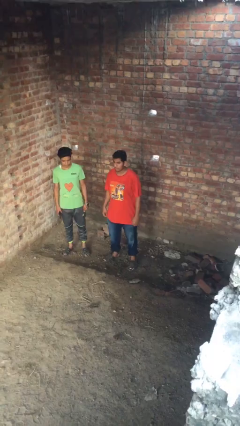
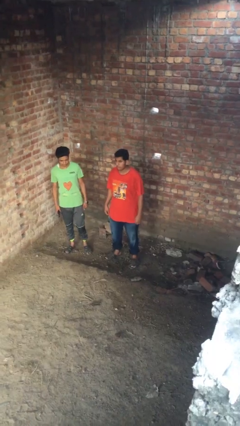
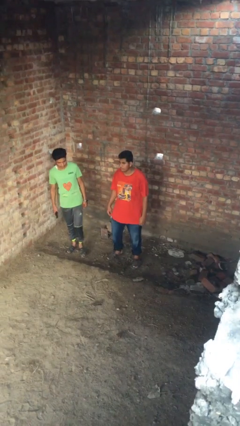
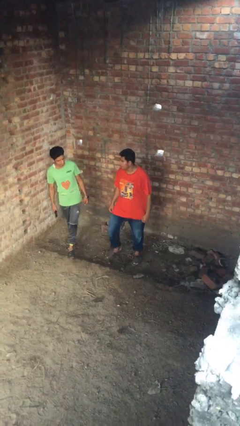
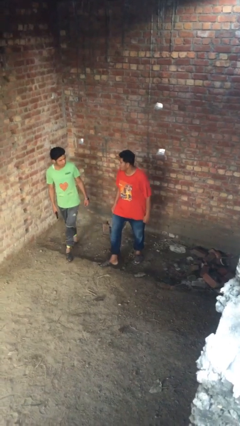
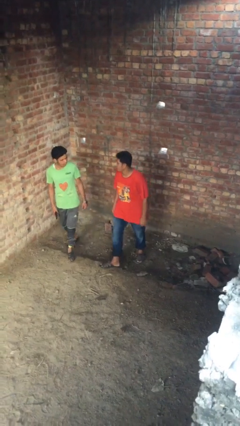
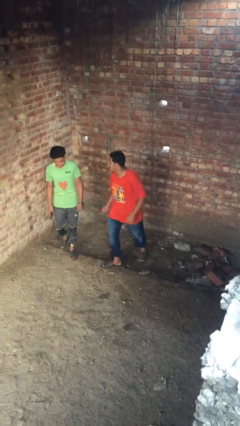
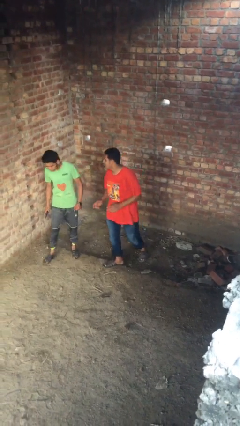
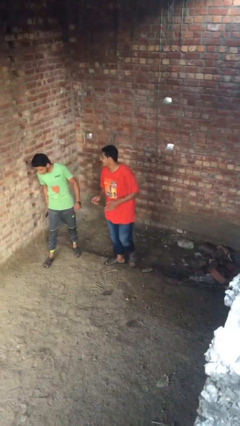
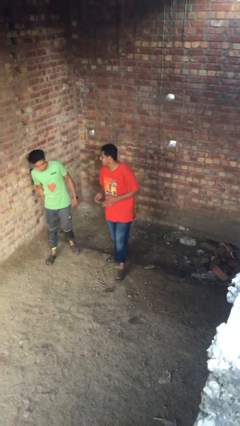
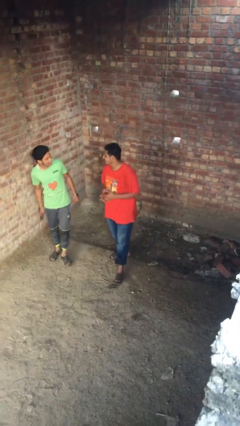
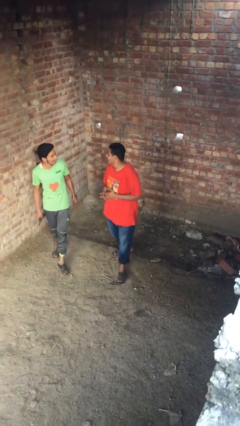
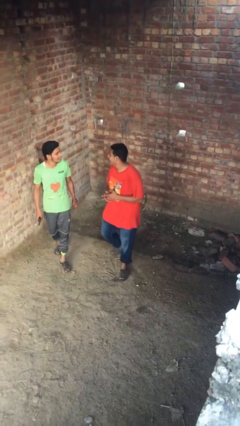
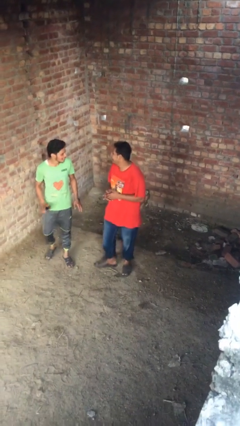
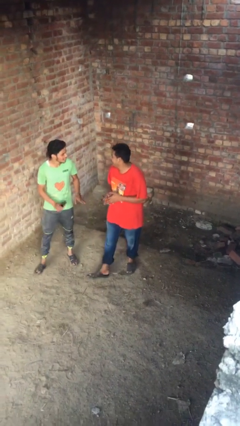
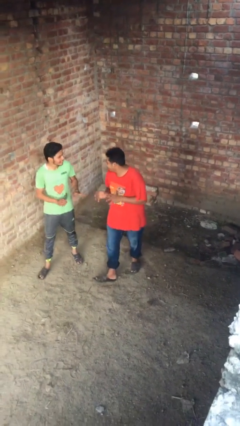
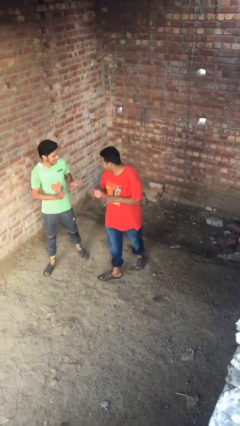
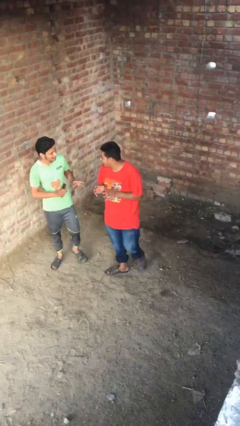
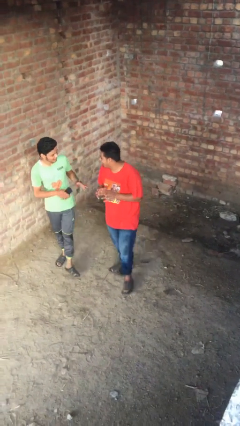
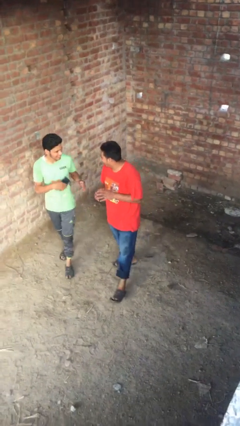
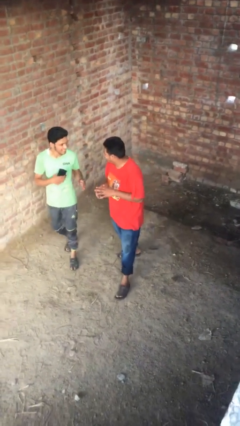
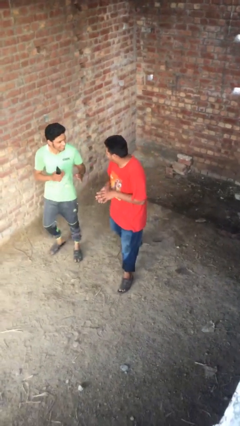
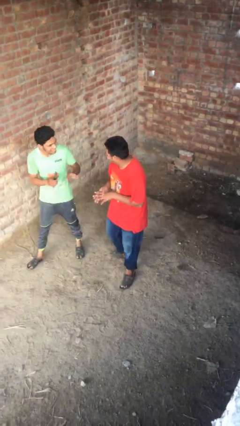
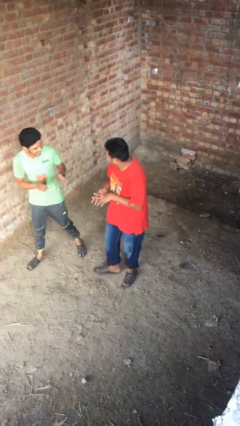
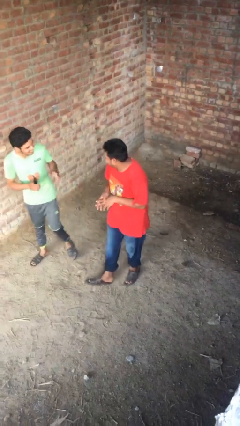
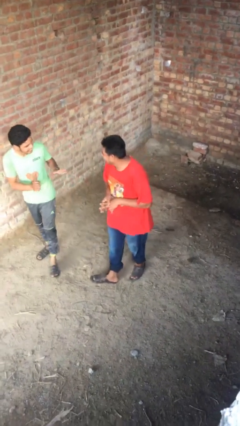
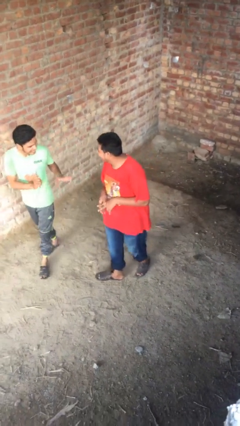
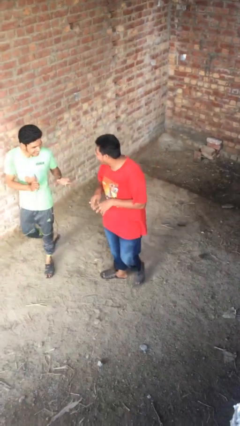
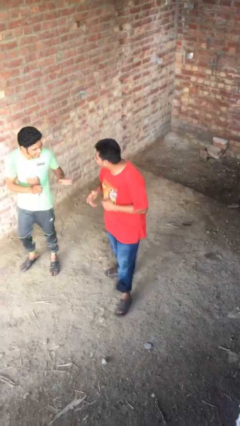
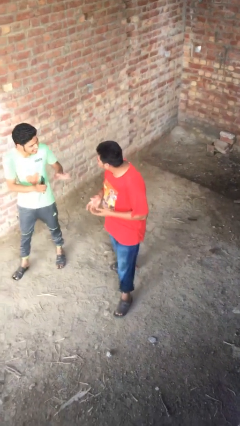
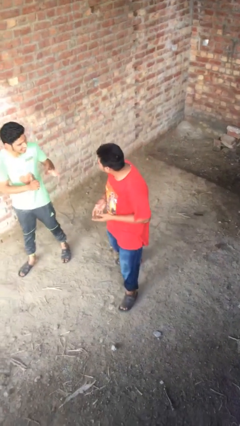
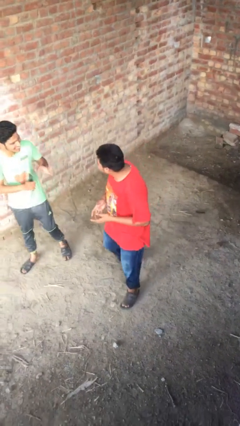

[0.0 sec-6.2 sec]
person talks to person

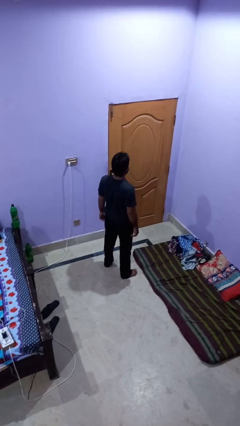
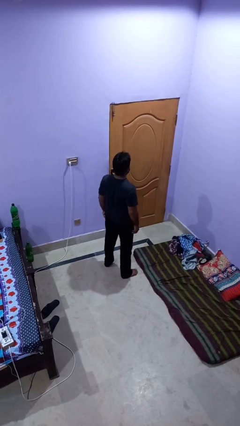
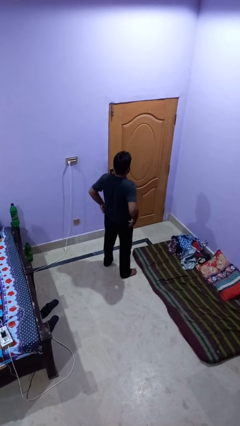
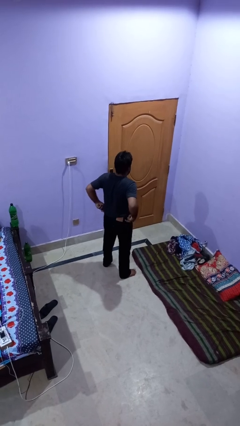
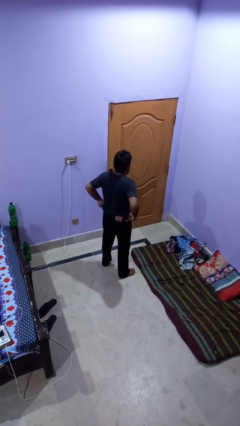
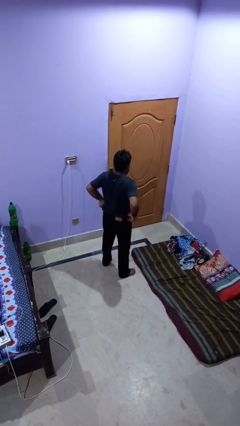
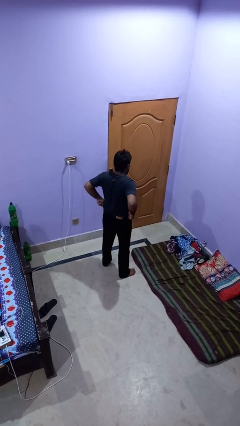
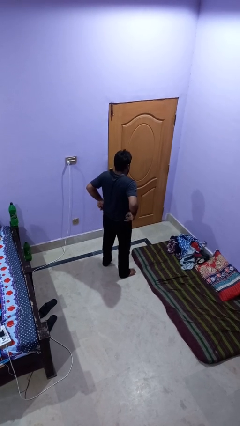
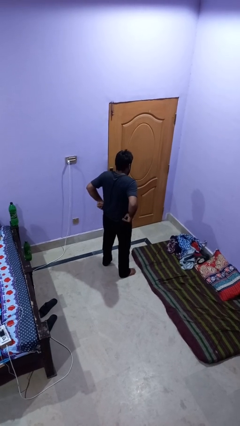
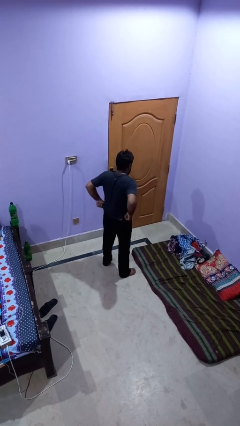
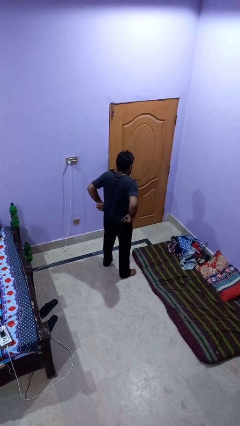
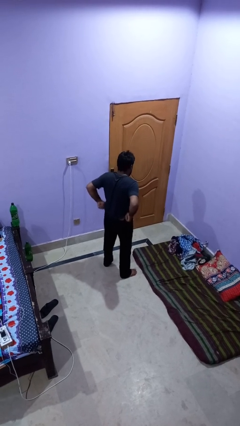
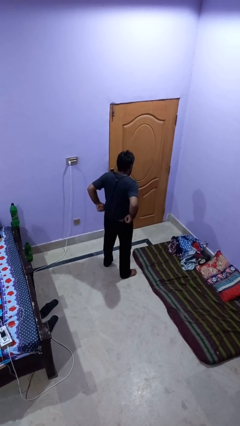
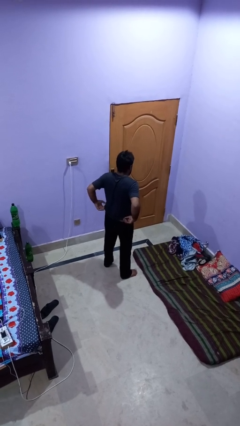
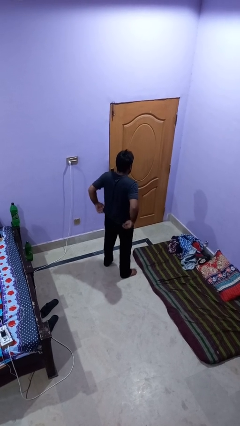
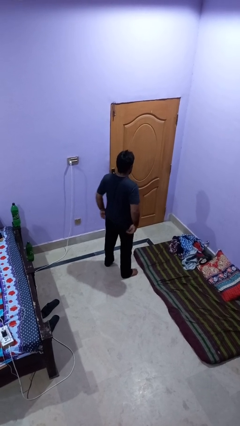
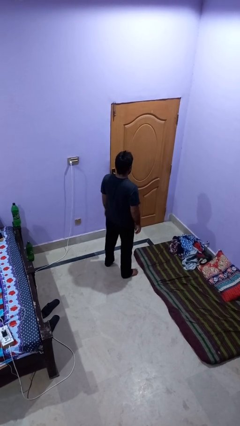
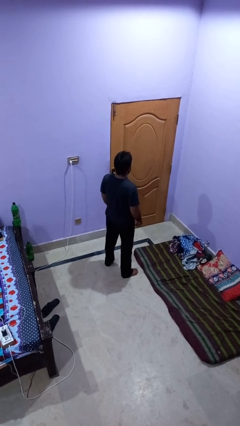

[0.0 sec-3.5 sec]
person hikes up pants

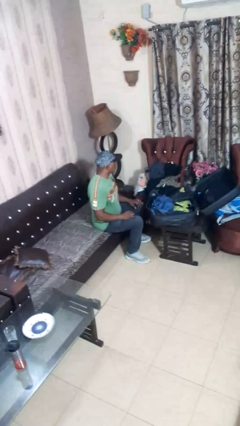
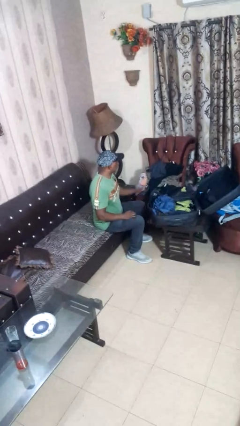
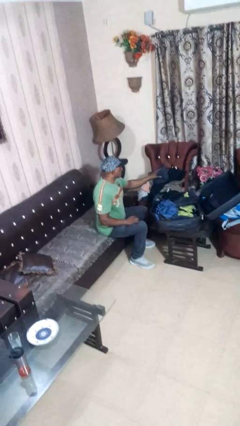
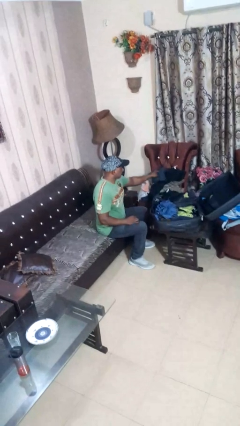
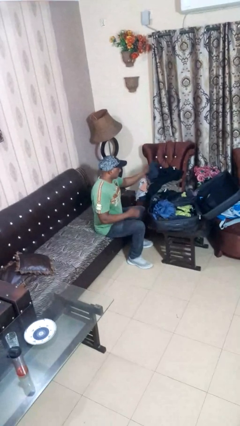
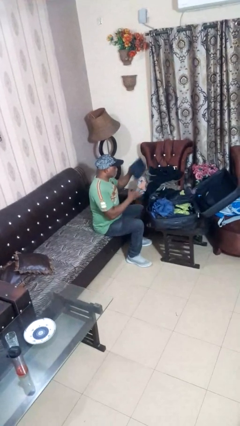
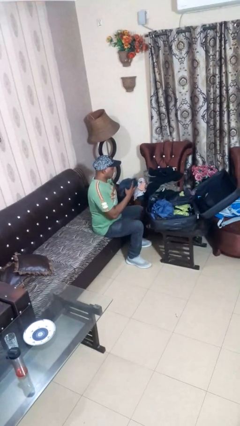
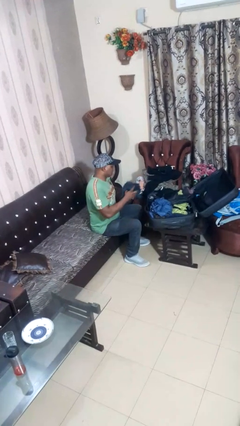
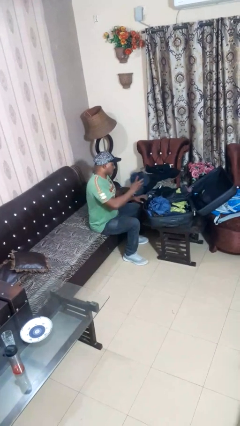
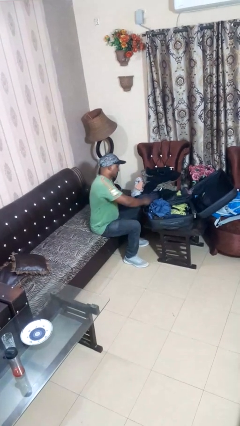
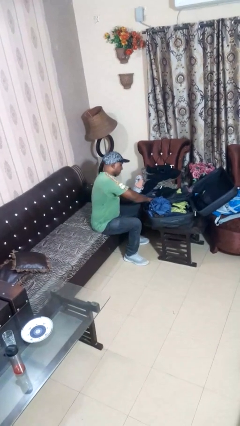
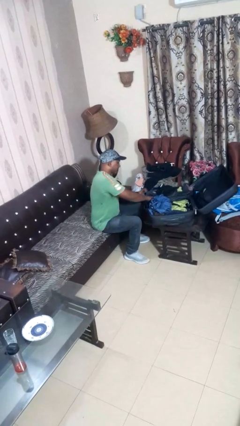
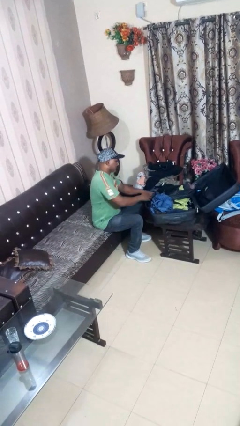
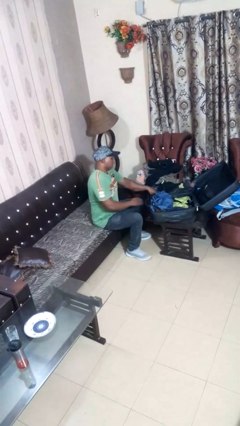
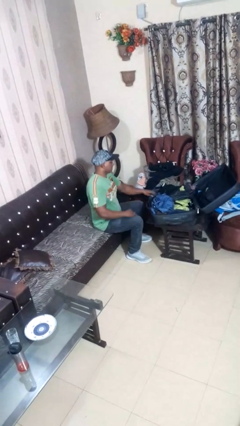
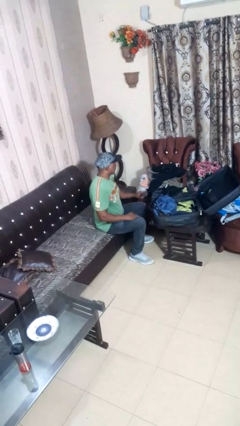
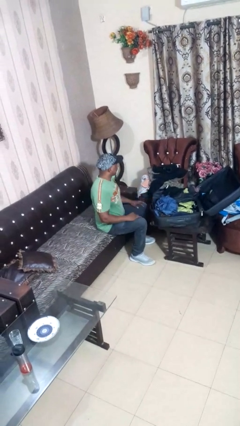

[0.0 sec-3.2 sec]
person loads clothes into suitcase

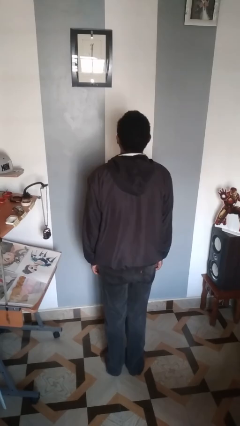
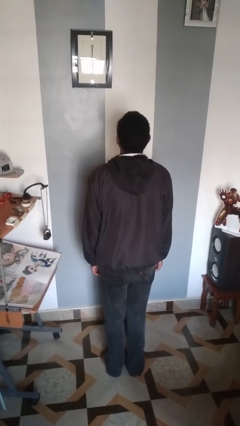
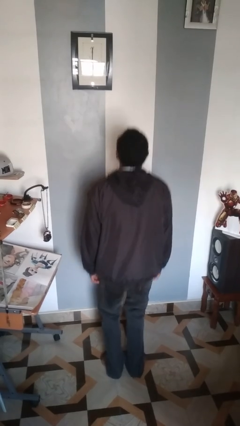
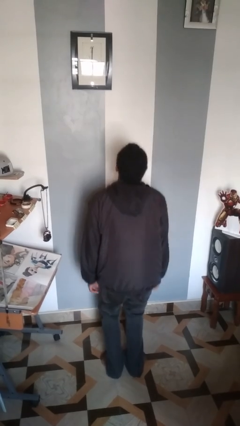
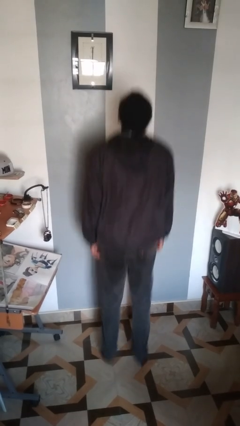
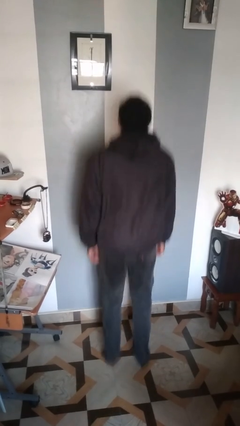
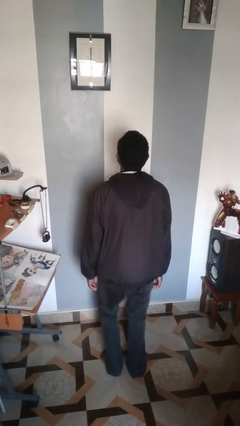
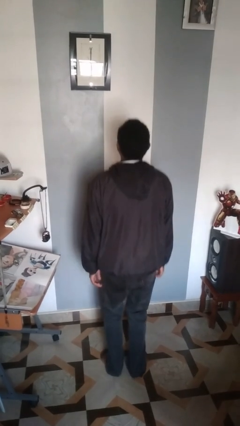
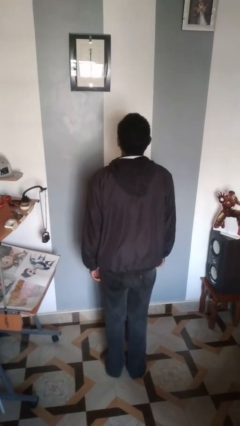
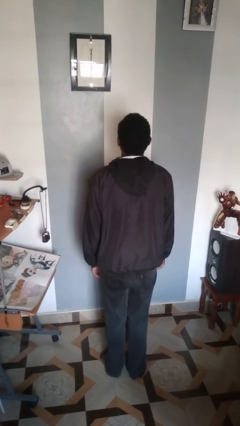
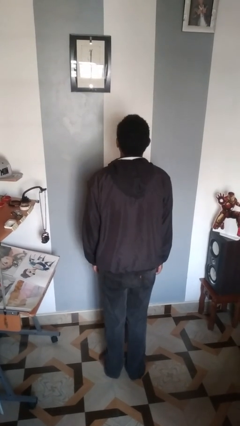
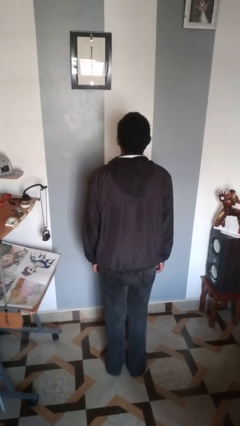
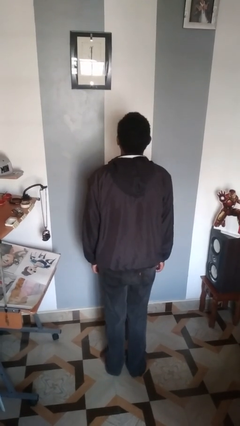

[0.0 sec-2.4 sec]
person jumps

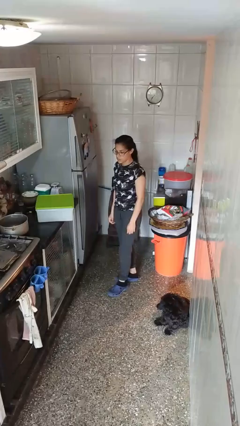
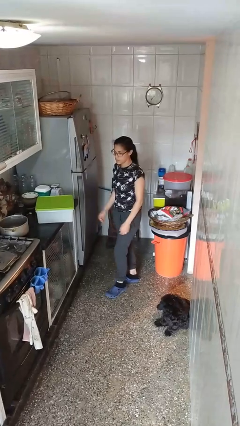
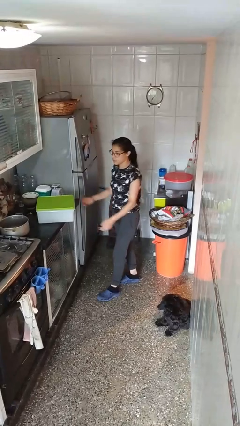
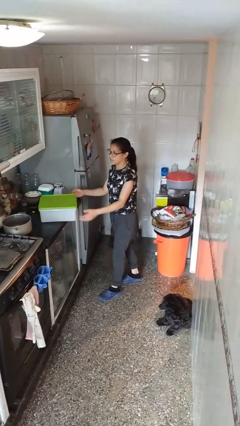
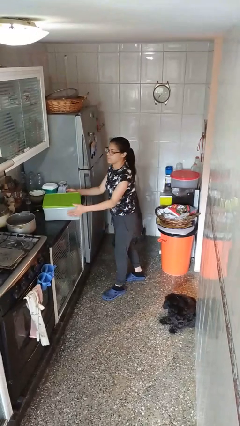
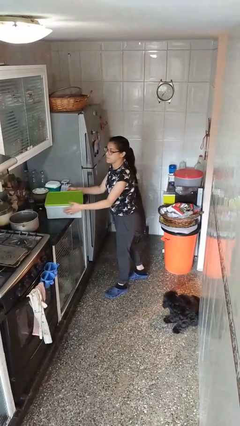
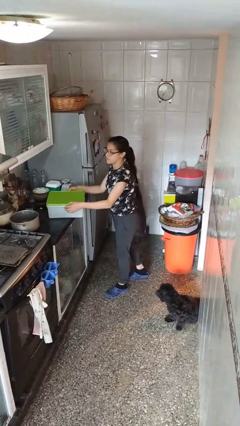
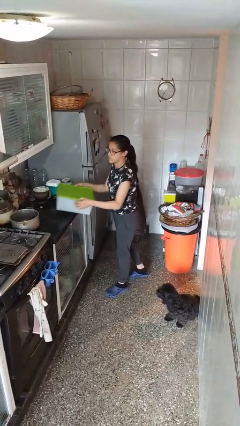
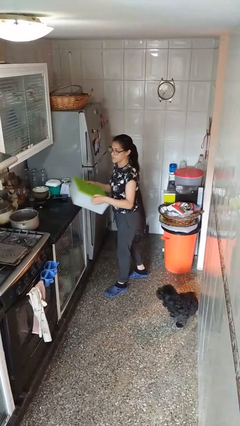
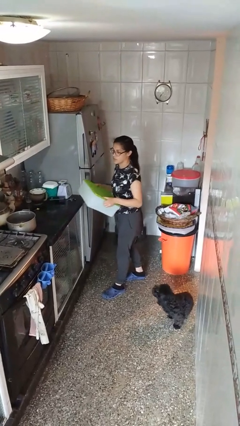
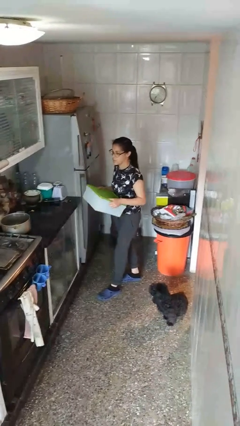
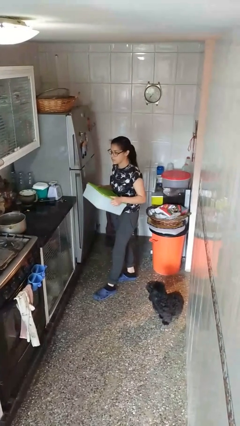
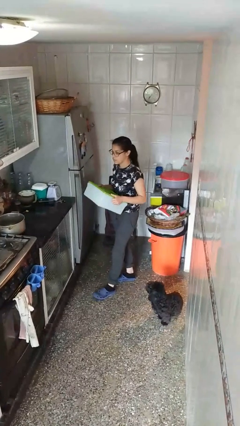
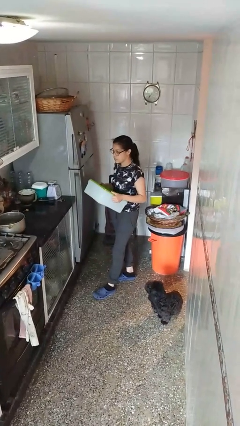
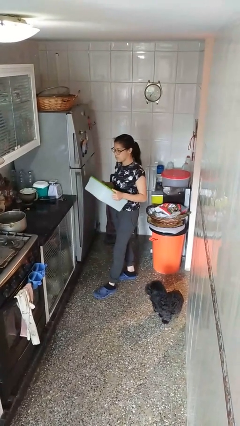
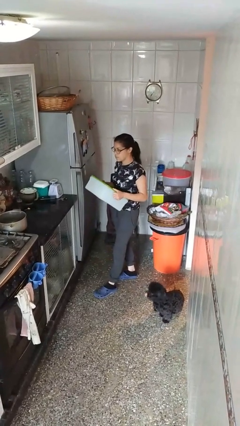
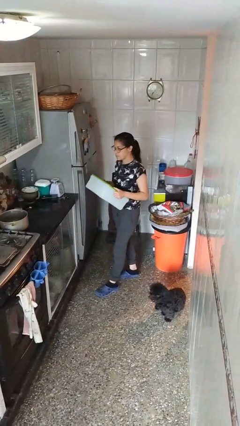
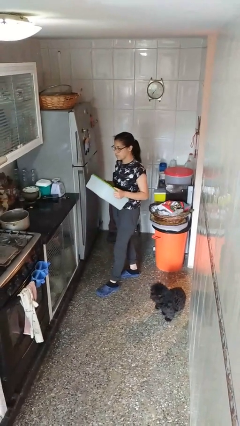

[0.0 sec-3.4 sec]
person picks up object from countertop
